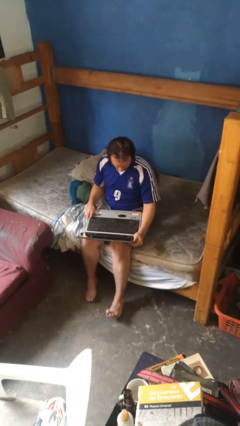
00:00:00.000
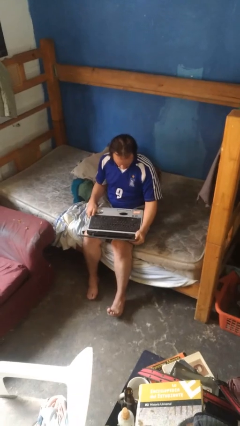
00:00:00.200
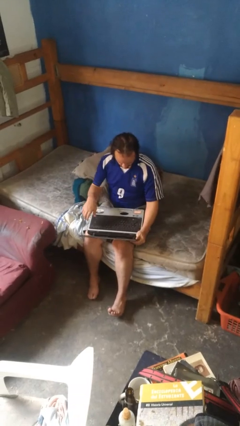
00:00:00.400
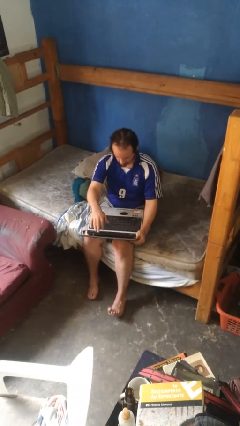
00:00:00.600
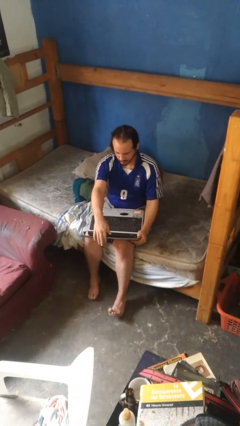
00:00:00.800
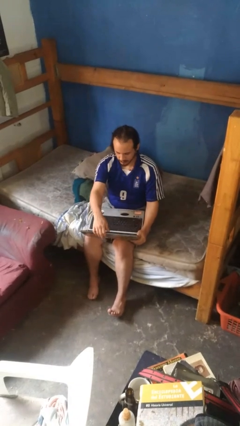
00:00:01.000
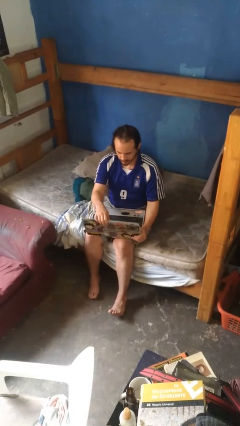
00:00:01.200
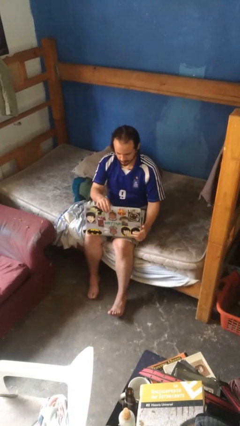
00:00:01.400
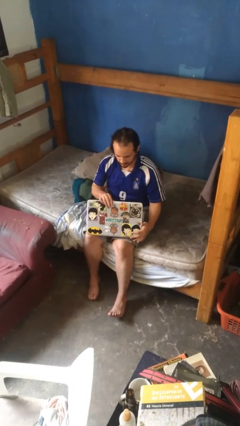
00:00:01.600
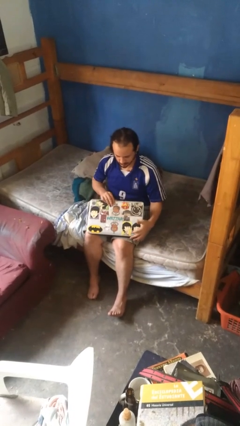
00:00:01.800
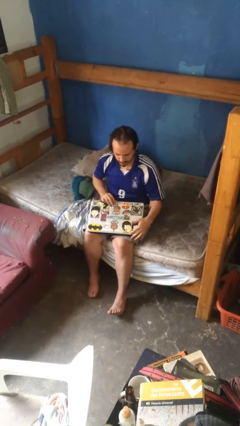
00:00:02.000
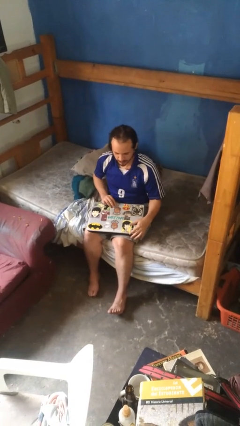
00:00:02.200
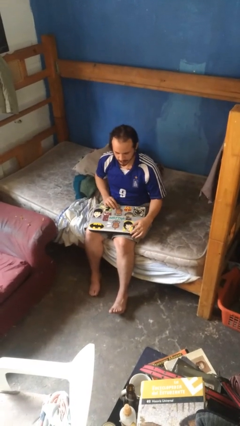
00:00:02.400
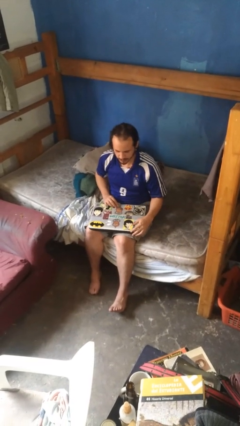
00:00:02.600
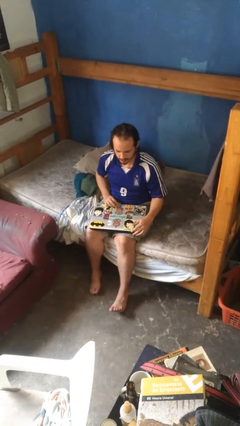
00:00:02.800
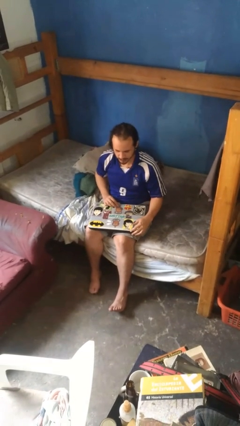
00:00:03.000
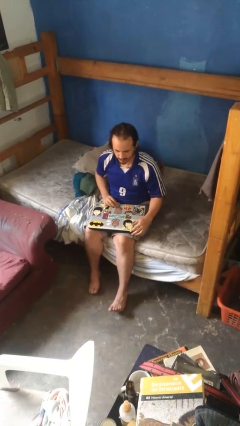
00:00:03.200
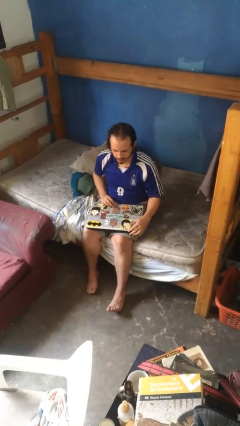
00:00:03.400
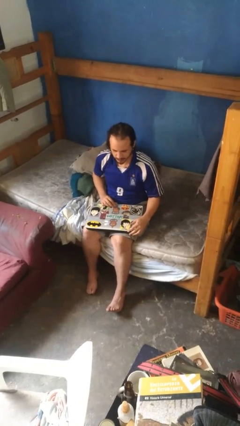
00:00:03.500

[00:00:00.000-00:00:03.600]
person closes laptop

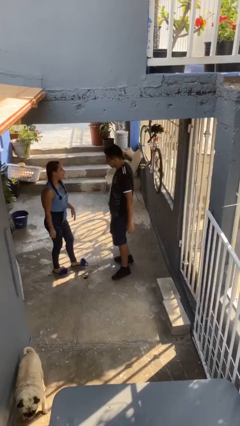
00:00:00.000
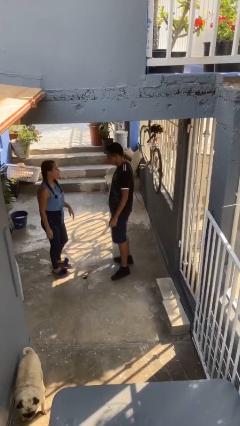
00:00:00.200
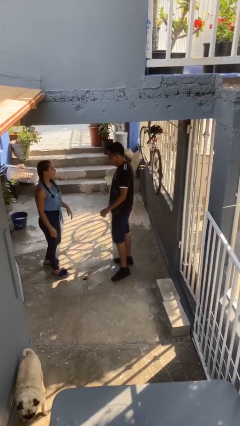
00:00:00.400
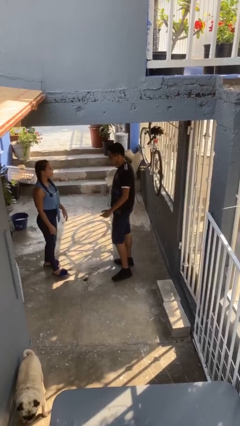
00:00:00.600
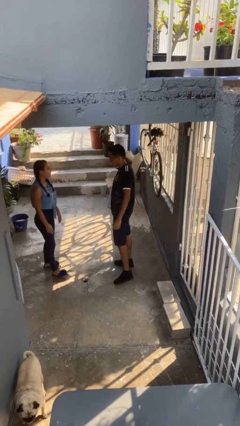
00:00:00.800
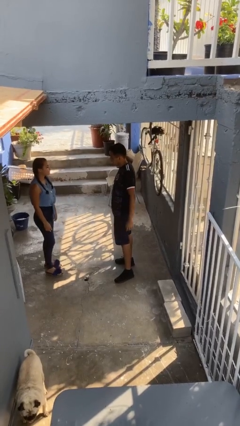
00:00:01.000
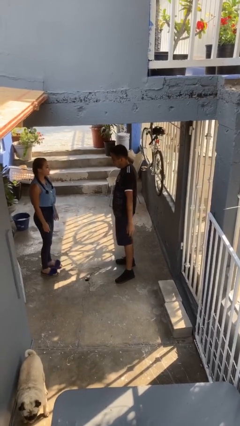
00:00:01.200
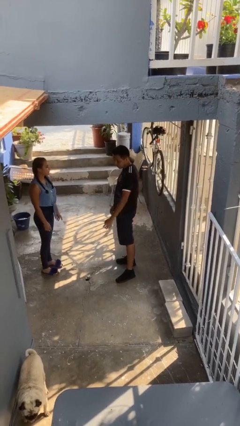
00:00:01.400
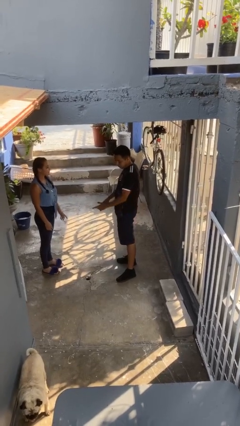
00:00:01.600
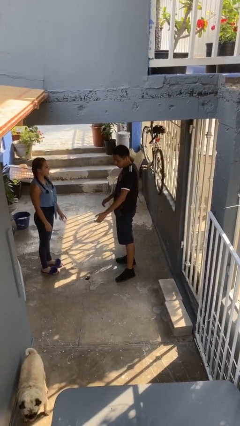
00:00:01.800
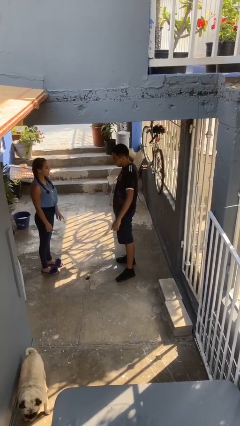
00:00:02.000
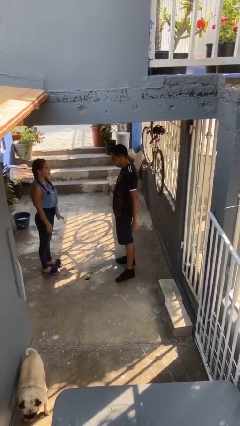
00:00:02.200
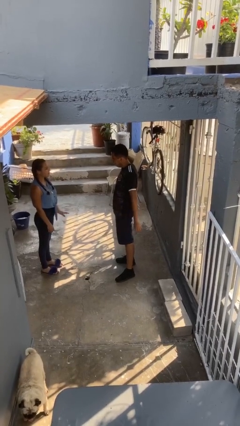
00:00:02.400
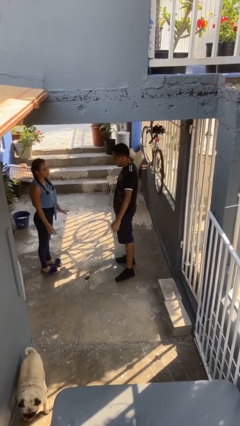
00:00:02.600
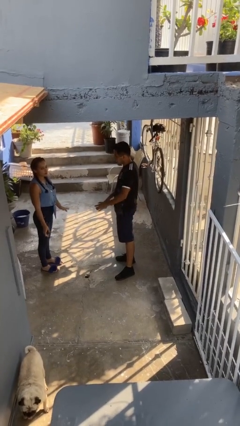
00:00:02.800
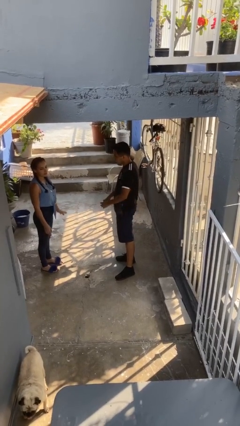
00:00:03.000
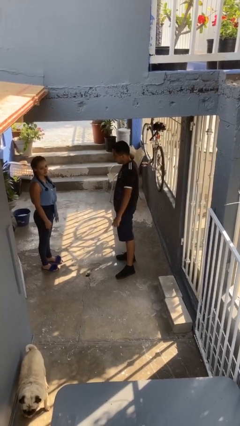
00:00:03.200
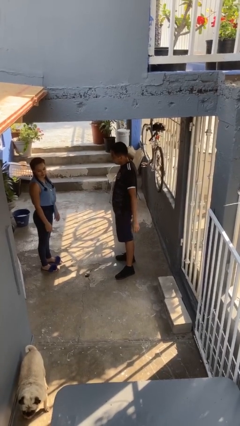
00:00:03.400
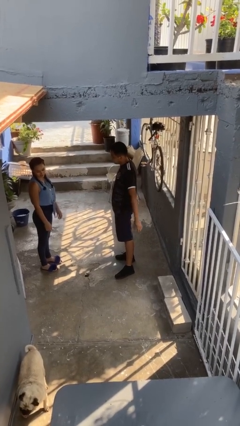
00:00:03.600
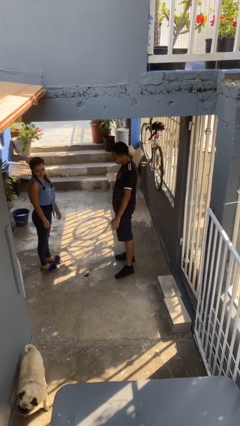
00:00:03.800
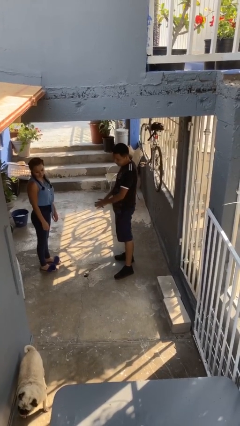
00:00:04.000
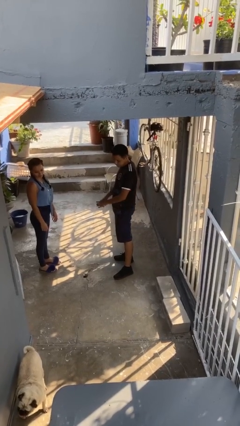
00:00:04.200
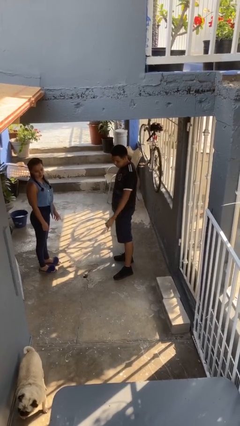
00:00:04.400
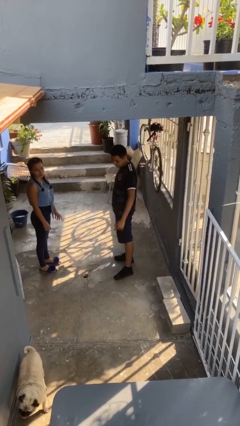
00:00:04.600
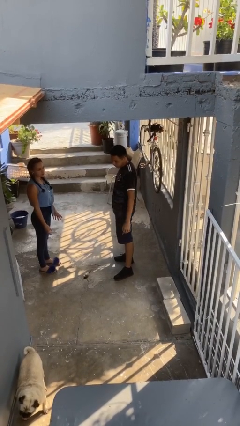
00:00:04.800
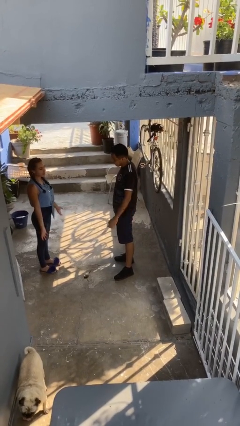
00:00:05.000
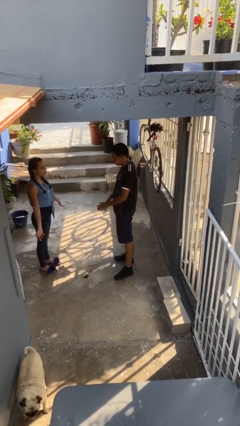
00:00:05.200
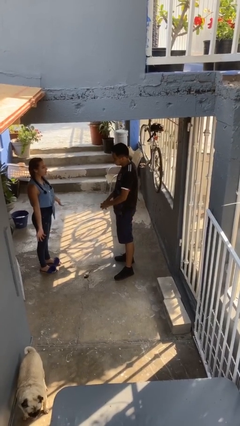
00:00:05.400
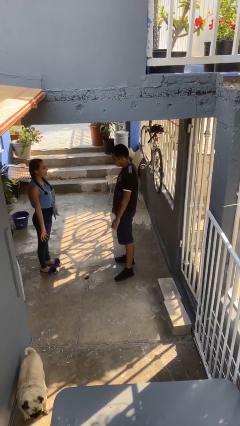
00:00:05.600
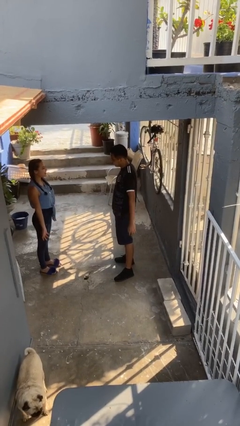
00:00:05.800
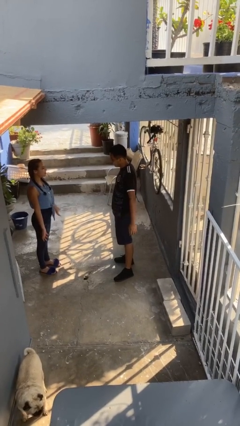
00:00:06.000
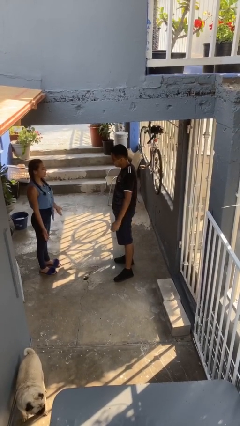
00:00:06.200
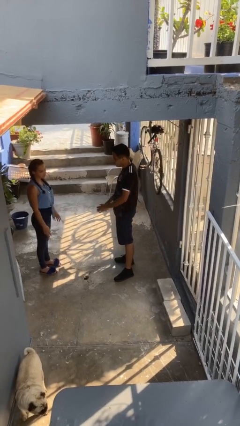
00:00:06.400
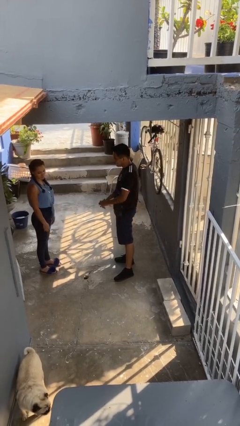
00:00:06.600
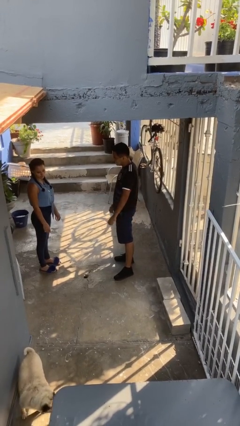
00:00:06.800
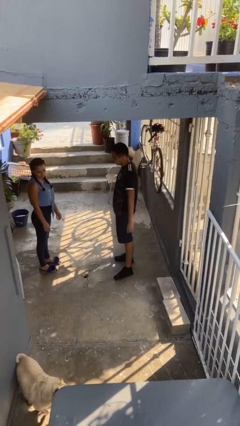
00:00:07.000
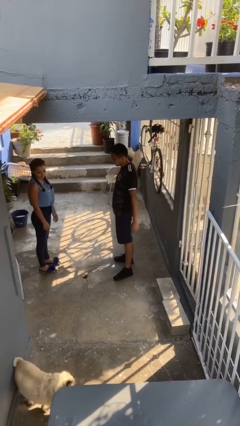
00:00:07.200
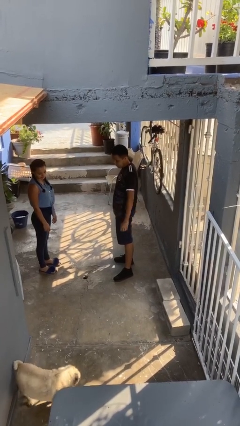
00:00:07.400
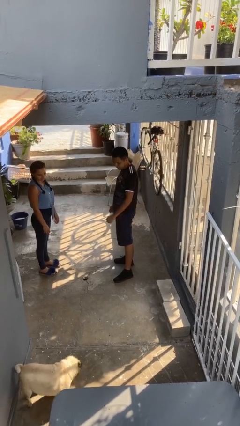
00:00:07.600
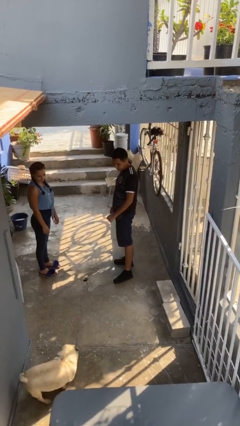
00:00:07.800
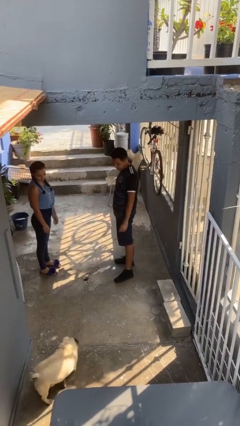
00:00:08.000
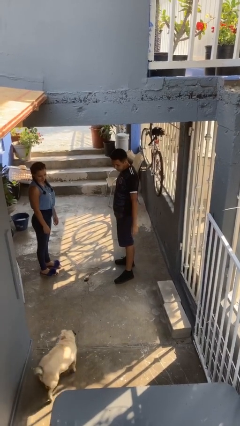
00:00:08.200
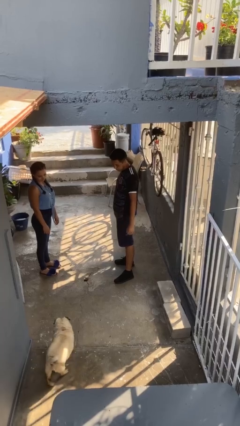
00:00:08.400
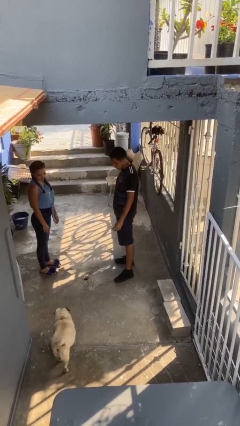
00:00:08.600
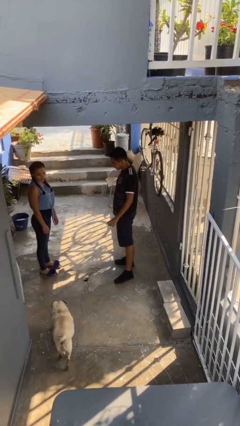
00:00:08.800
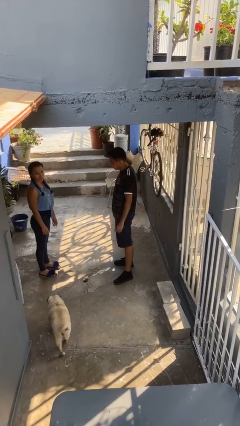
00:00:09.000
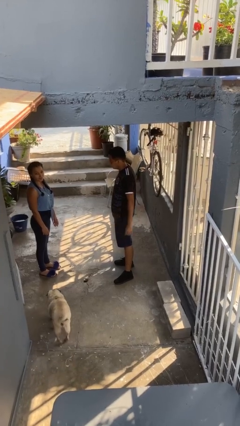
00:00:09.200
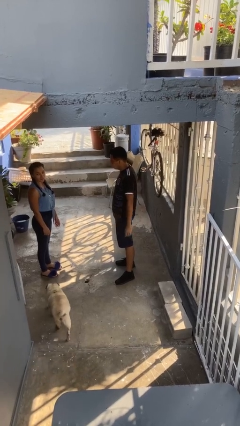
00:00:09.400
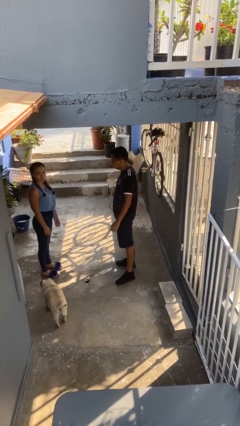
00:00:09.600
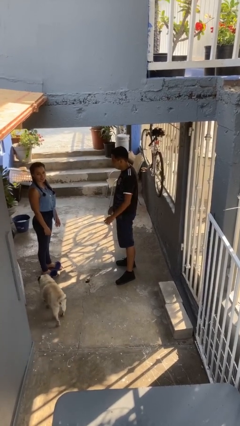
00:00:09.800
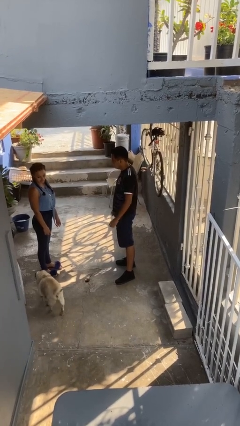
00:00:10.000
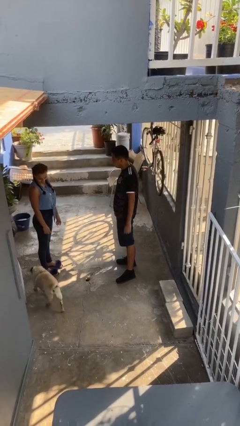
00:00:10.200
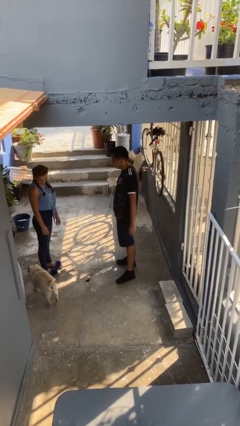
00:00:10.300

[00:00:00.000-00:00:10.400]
person talks to person

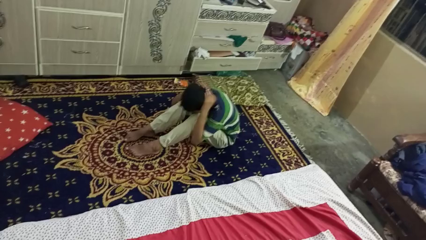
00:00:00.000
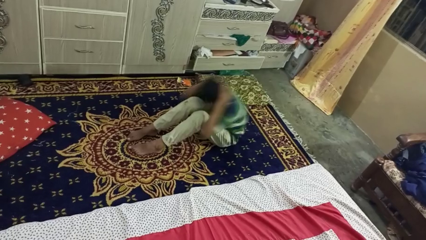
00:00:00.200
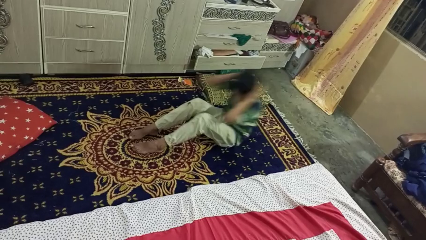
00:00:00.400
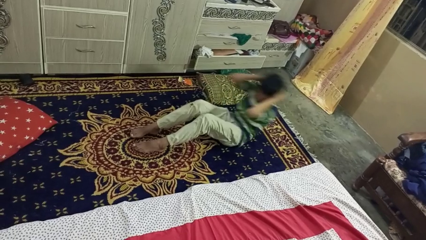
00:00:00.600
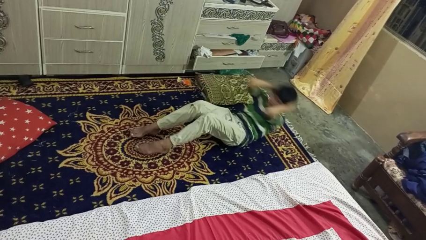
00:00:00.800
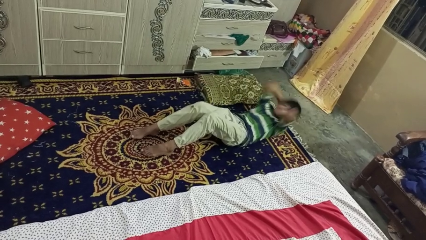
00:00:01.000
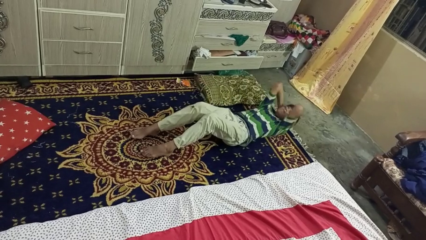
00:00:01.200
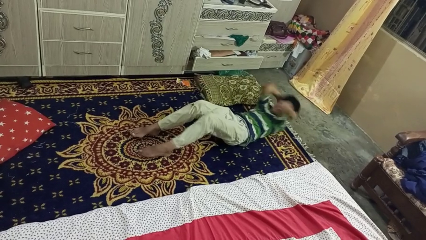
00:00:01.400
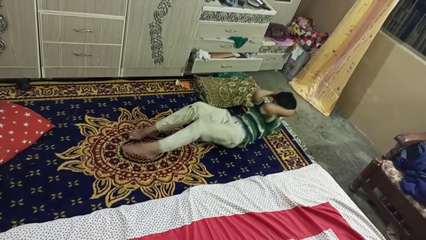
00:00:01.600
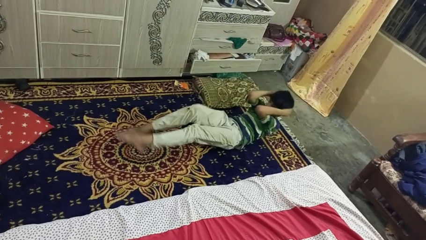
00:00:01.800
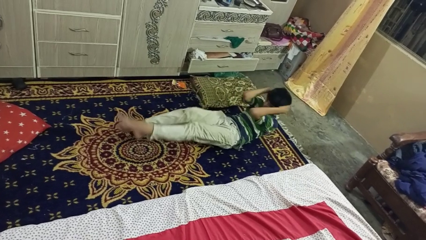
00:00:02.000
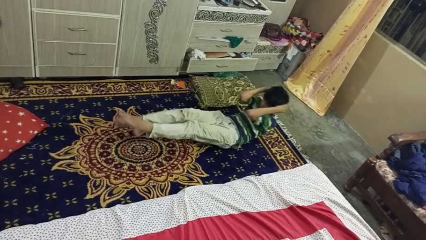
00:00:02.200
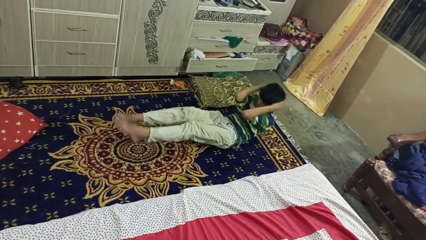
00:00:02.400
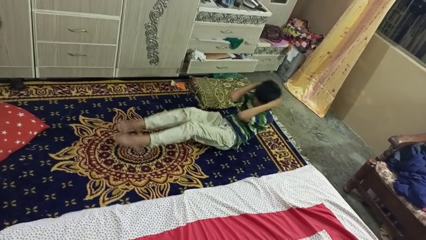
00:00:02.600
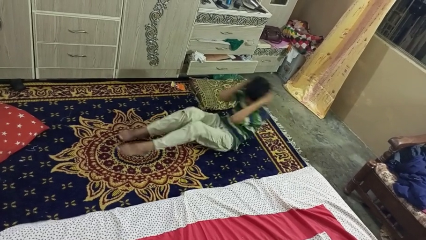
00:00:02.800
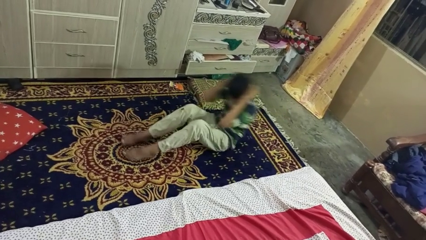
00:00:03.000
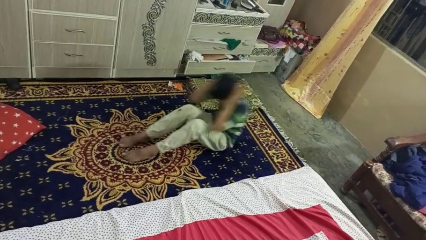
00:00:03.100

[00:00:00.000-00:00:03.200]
person exercises with situp

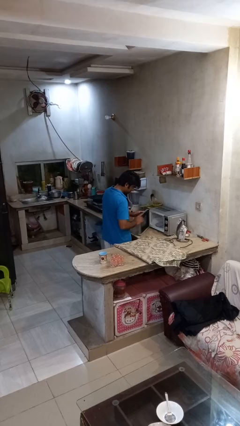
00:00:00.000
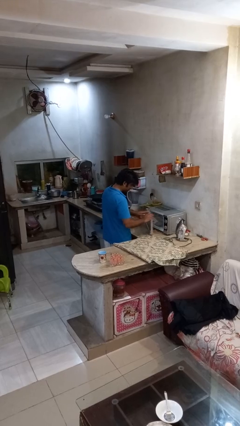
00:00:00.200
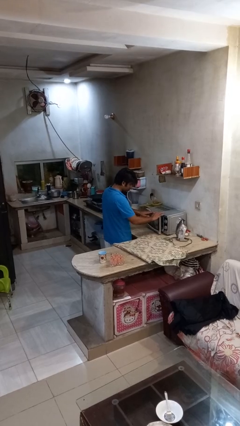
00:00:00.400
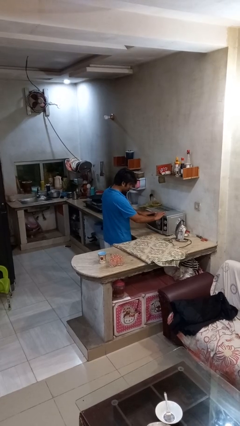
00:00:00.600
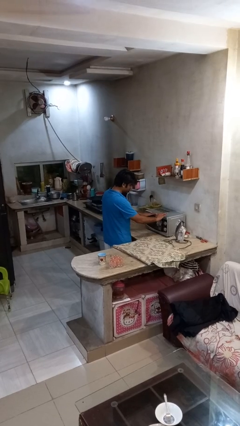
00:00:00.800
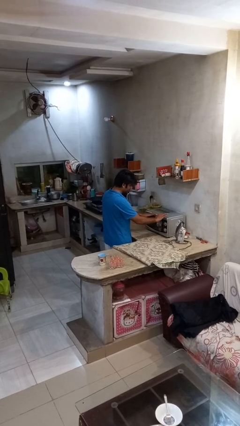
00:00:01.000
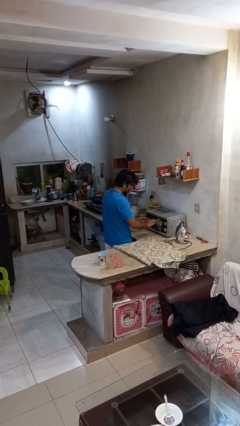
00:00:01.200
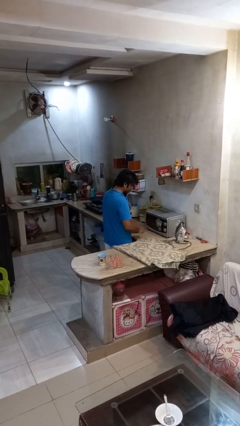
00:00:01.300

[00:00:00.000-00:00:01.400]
person closes microwave
